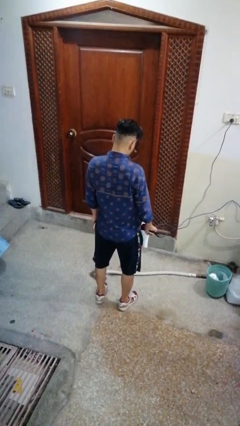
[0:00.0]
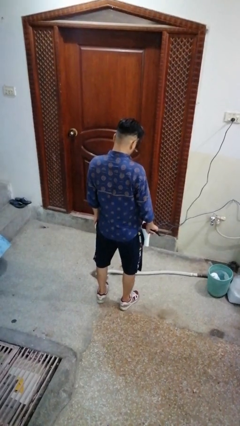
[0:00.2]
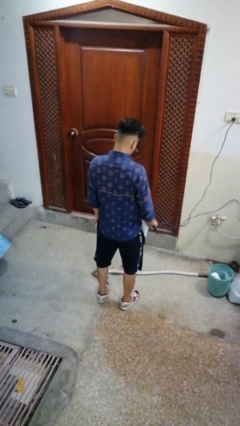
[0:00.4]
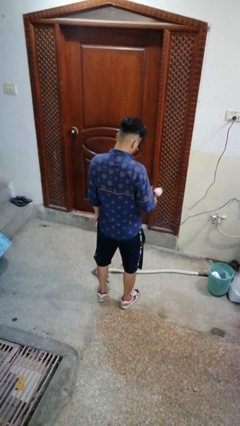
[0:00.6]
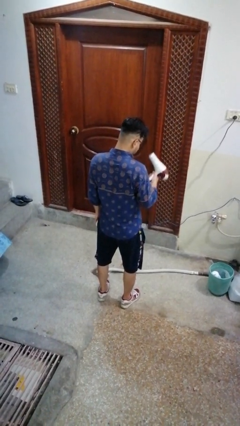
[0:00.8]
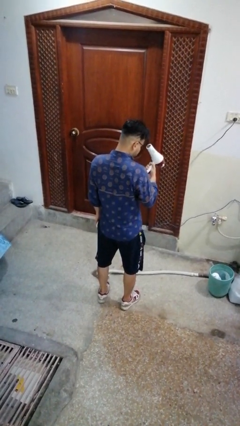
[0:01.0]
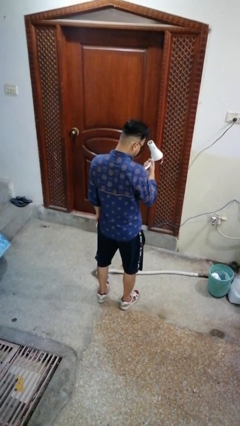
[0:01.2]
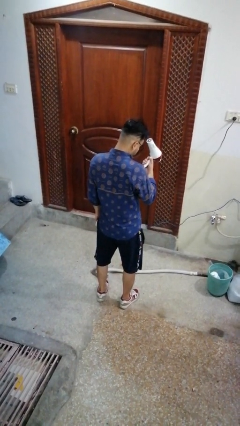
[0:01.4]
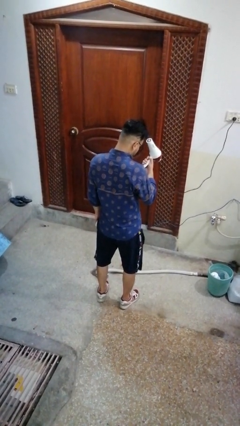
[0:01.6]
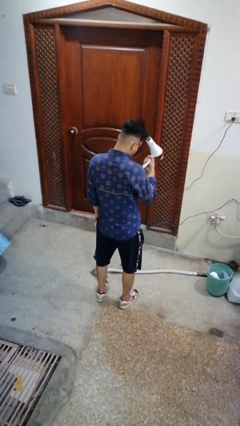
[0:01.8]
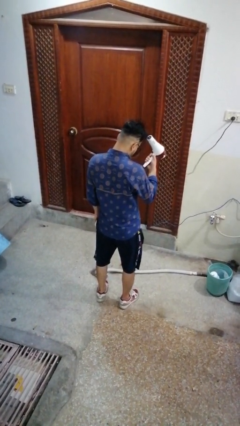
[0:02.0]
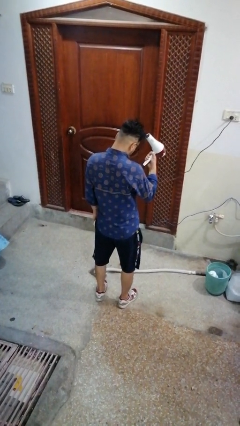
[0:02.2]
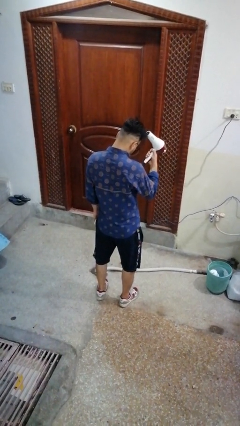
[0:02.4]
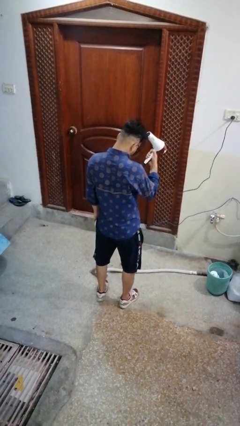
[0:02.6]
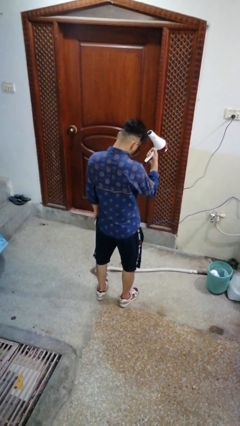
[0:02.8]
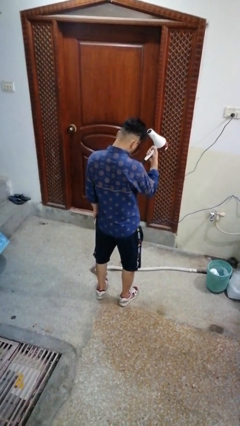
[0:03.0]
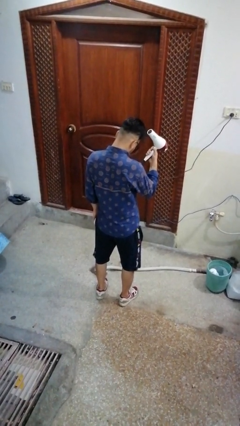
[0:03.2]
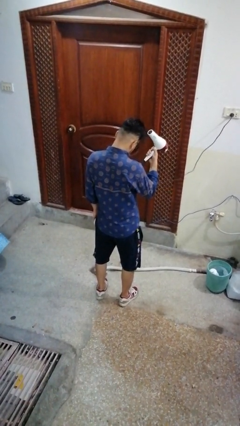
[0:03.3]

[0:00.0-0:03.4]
person dries hair with hairdryer

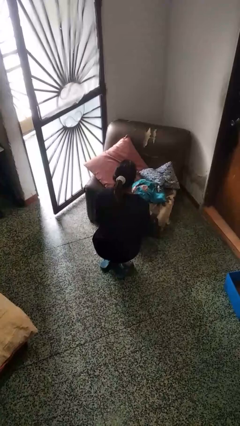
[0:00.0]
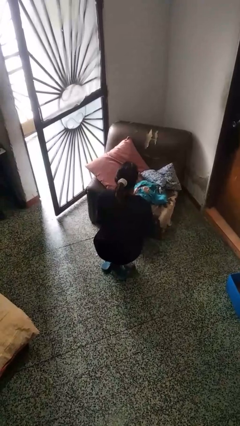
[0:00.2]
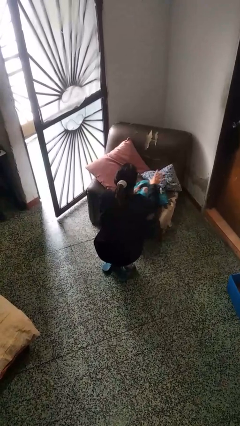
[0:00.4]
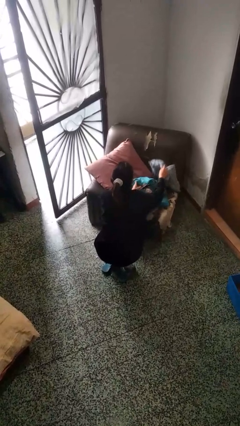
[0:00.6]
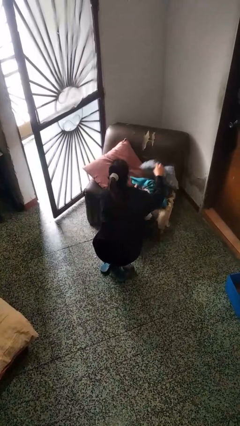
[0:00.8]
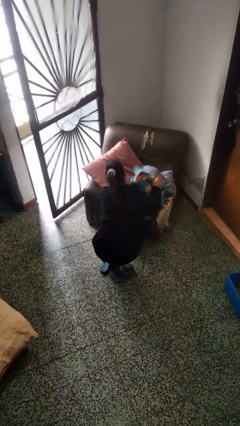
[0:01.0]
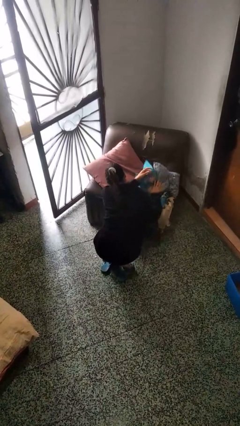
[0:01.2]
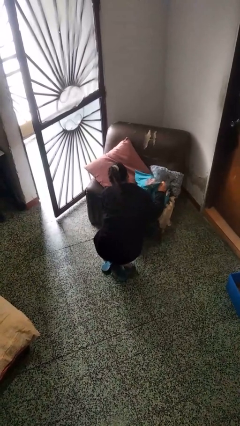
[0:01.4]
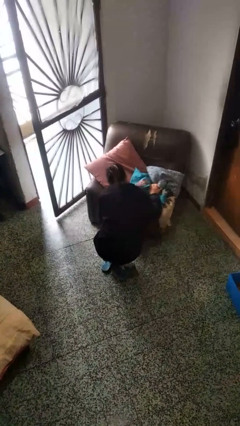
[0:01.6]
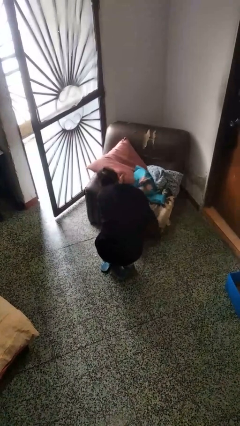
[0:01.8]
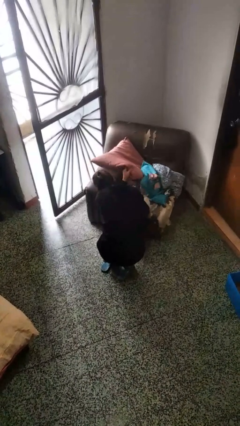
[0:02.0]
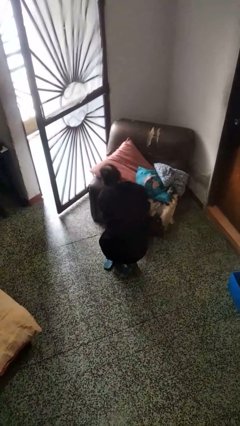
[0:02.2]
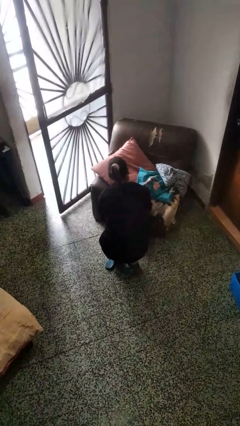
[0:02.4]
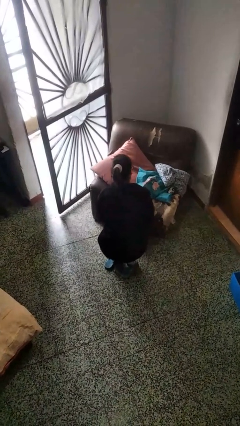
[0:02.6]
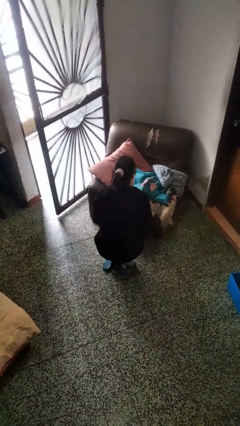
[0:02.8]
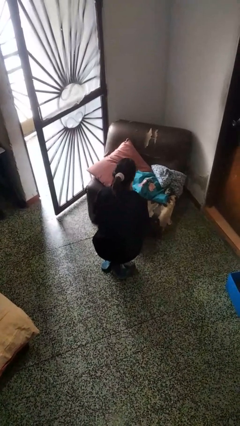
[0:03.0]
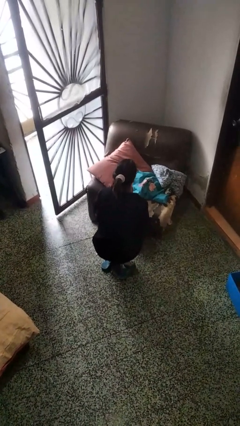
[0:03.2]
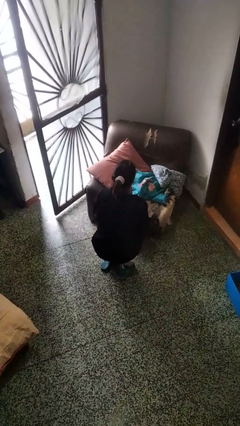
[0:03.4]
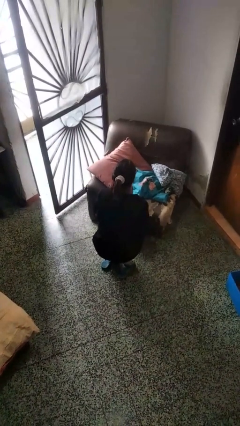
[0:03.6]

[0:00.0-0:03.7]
person searches in couch

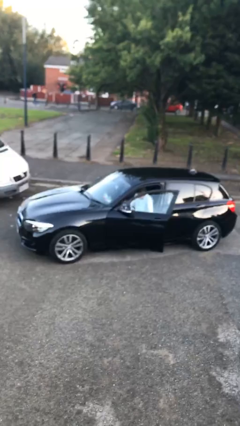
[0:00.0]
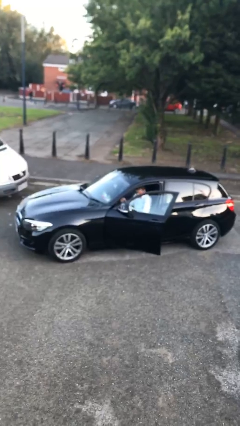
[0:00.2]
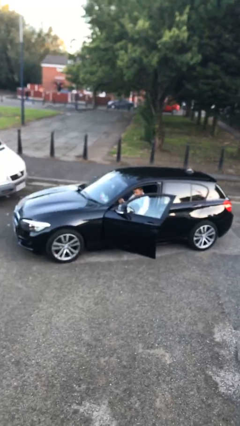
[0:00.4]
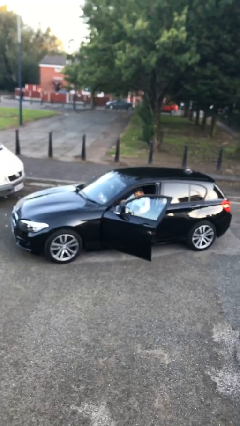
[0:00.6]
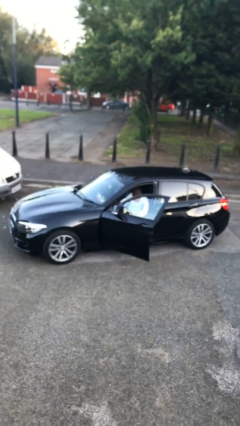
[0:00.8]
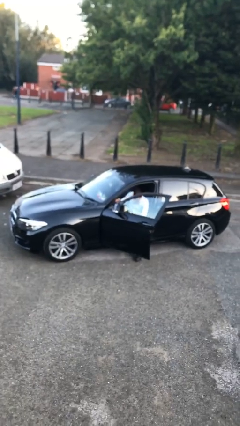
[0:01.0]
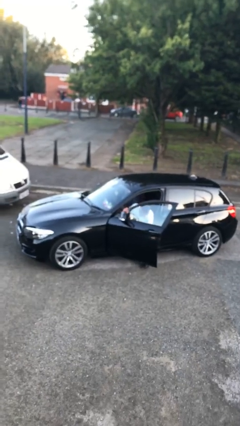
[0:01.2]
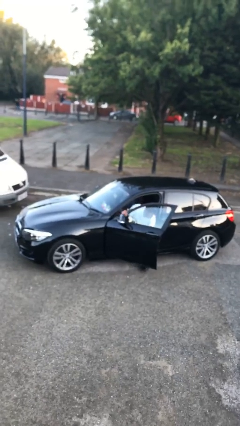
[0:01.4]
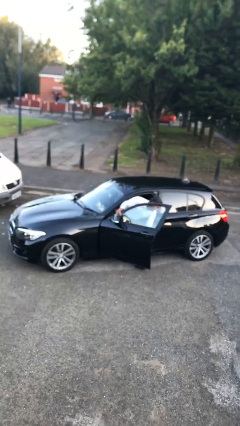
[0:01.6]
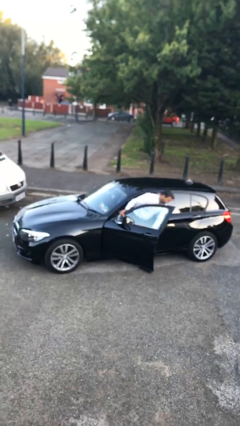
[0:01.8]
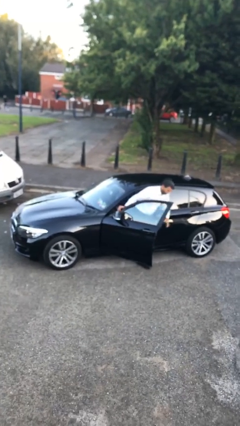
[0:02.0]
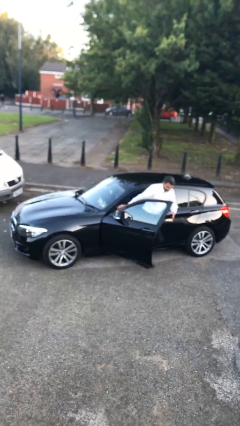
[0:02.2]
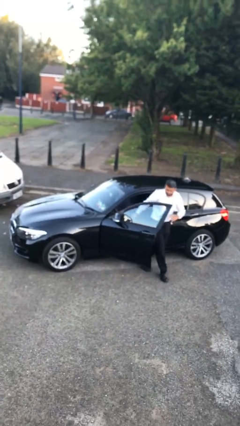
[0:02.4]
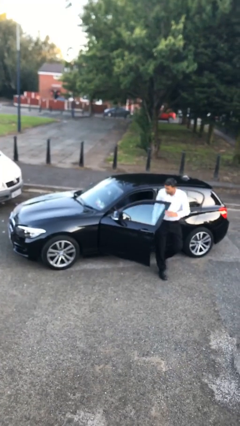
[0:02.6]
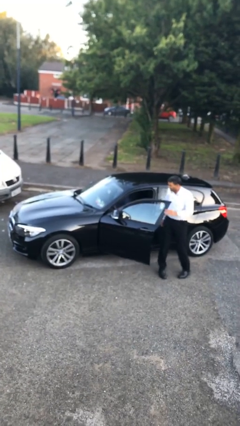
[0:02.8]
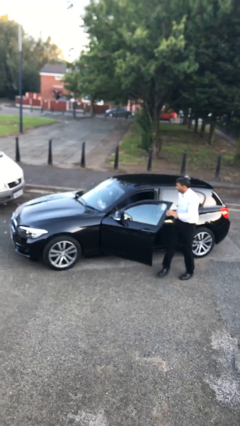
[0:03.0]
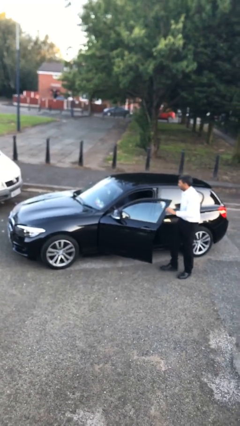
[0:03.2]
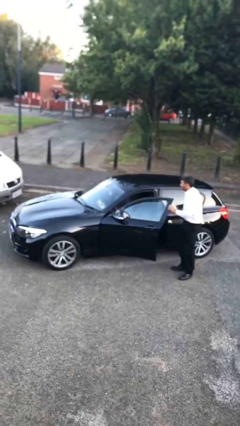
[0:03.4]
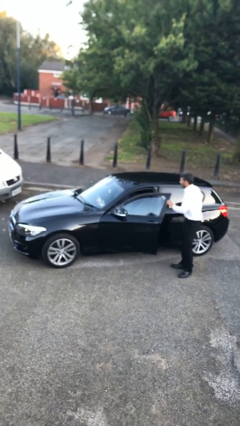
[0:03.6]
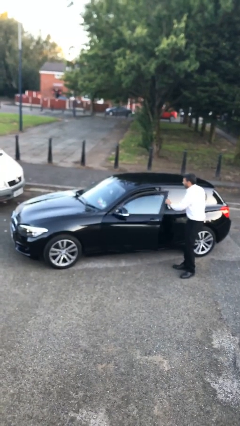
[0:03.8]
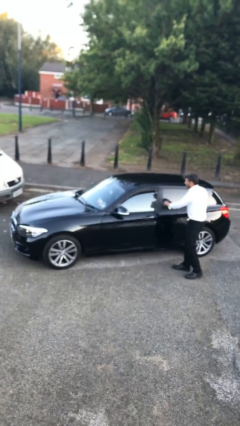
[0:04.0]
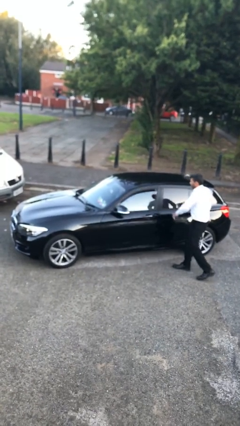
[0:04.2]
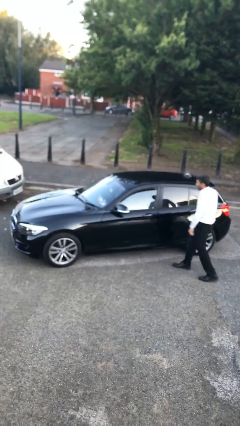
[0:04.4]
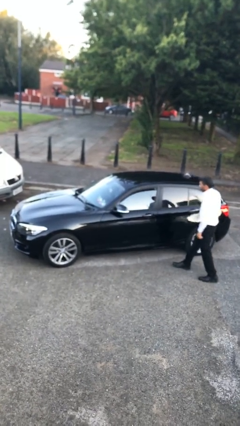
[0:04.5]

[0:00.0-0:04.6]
car drops off person

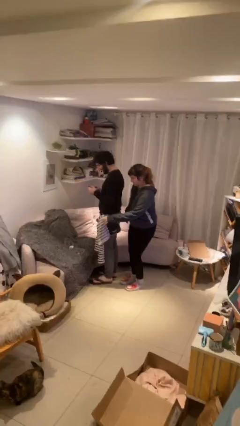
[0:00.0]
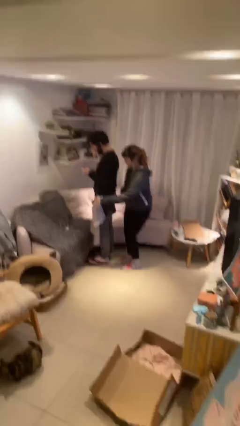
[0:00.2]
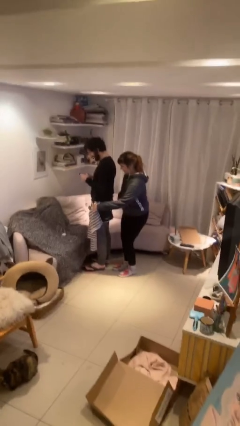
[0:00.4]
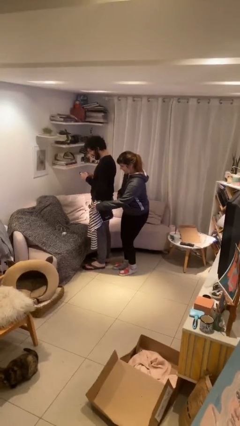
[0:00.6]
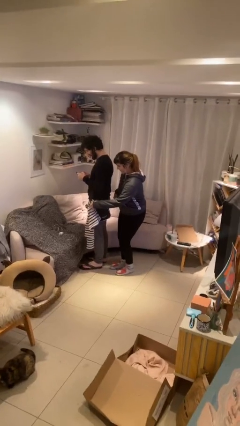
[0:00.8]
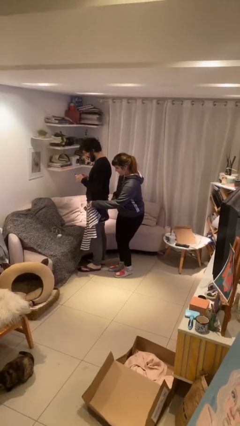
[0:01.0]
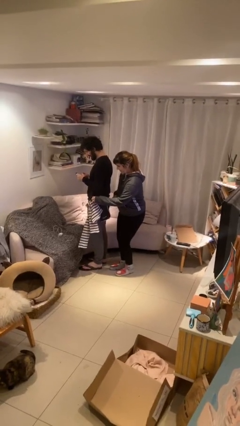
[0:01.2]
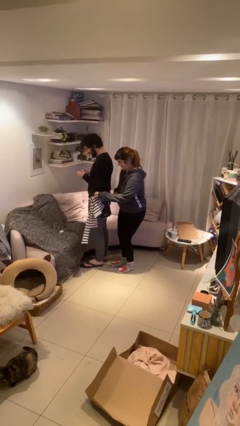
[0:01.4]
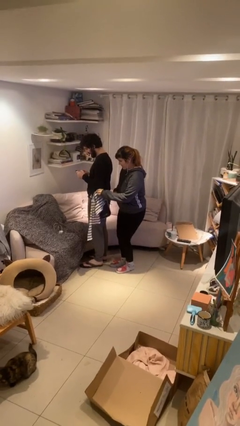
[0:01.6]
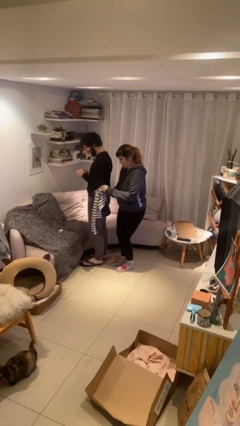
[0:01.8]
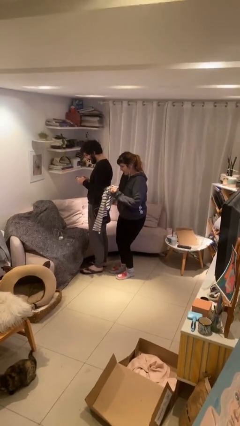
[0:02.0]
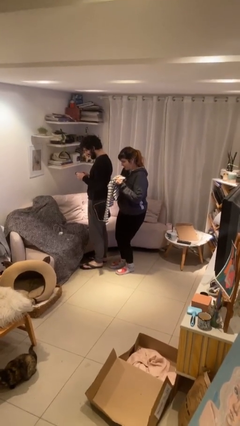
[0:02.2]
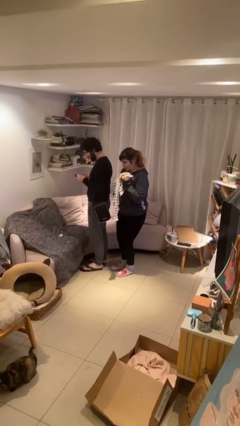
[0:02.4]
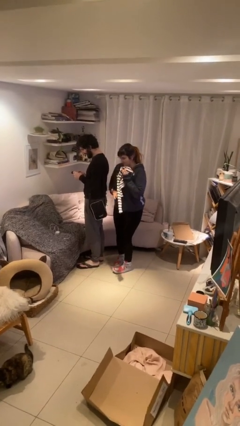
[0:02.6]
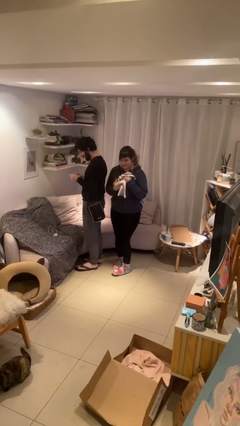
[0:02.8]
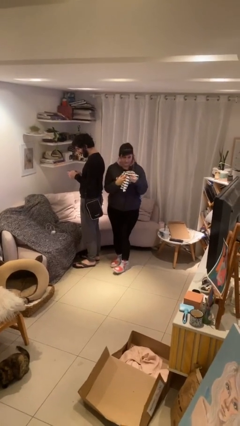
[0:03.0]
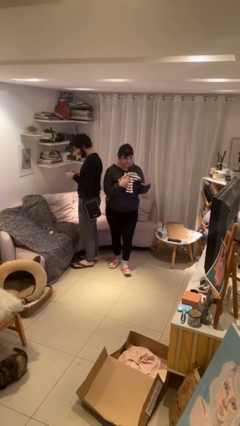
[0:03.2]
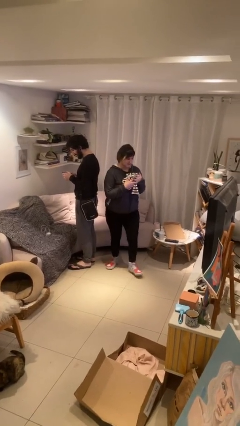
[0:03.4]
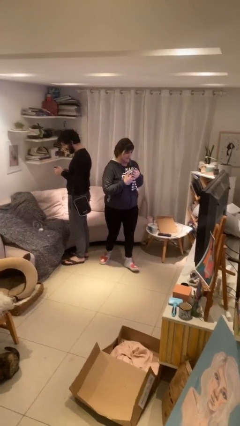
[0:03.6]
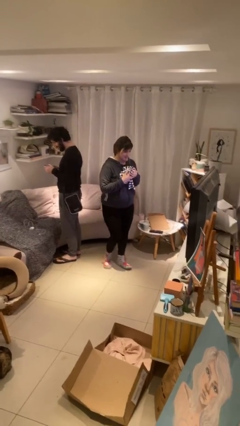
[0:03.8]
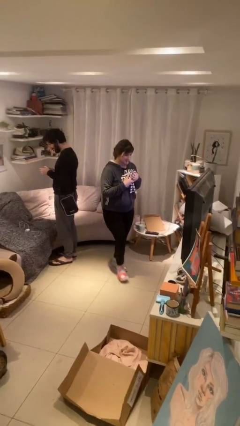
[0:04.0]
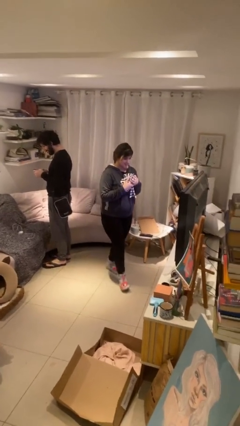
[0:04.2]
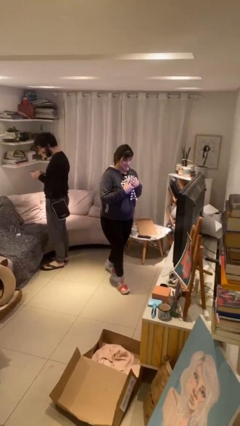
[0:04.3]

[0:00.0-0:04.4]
person steals object from person

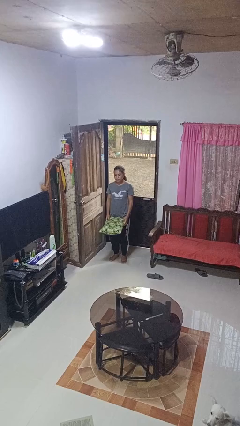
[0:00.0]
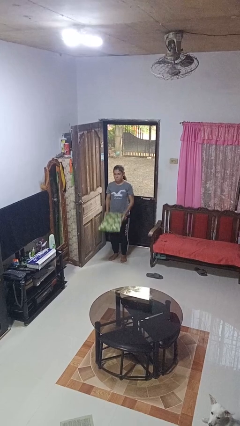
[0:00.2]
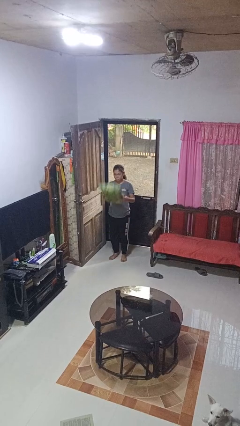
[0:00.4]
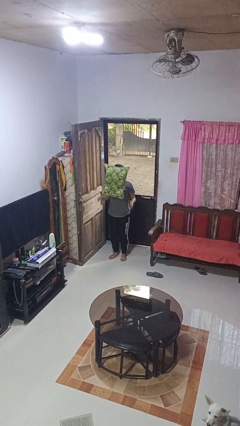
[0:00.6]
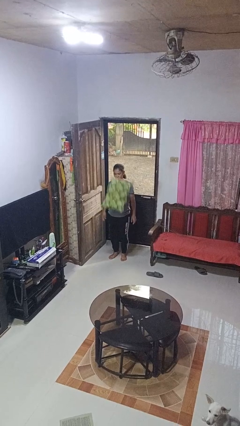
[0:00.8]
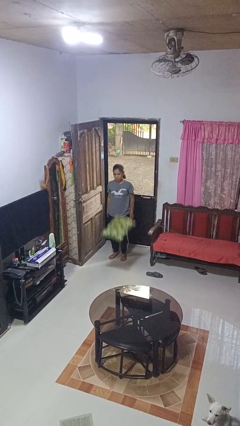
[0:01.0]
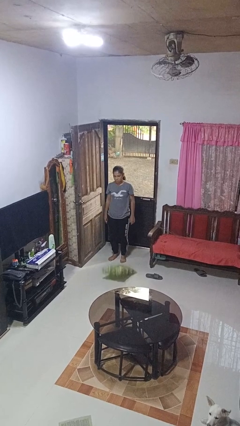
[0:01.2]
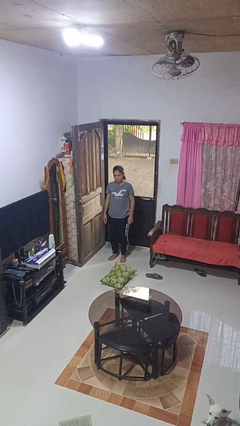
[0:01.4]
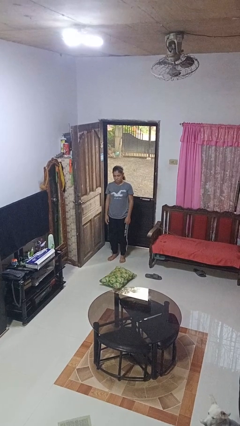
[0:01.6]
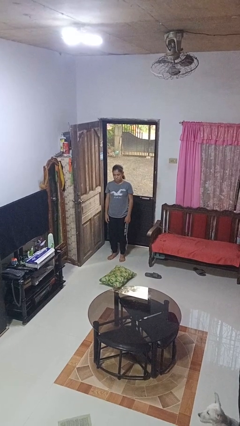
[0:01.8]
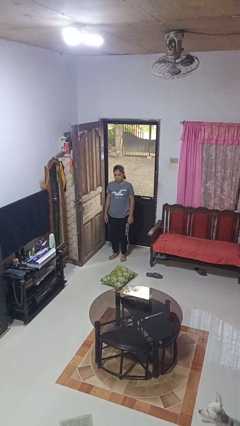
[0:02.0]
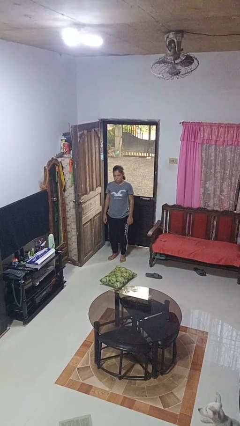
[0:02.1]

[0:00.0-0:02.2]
person throws object into air
